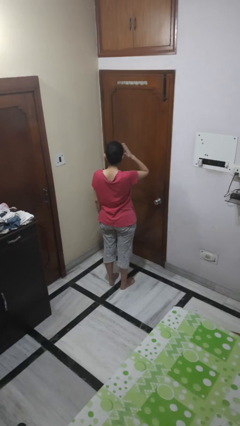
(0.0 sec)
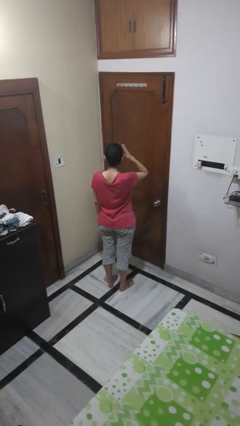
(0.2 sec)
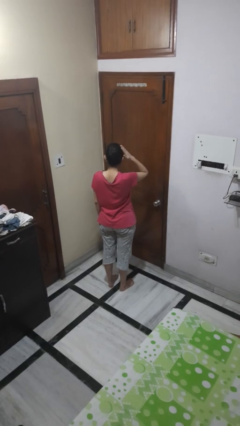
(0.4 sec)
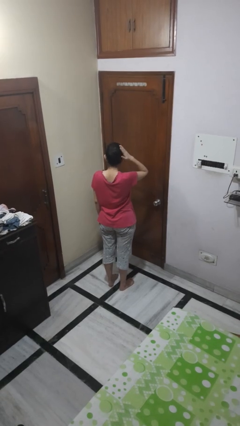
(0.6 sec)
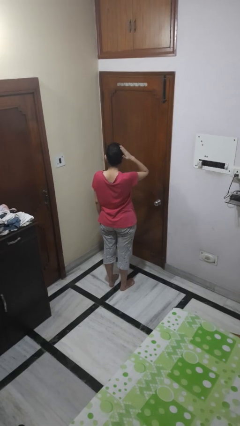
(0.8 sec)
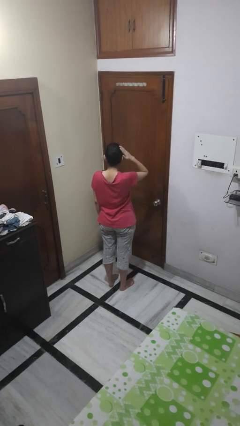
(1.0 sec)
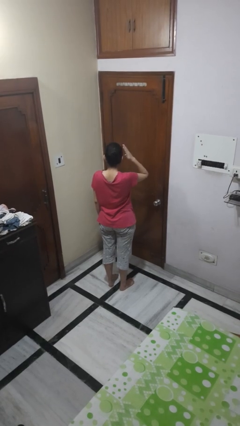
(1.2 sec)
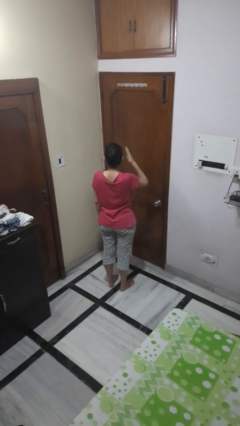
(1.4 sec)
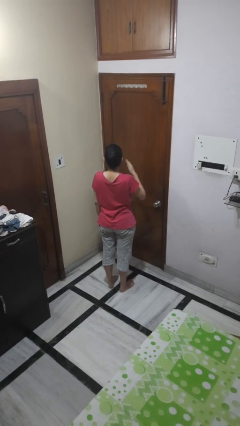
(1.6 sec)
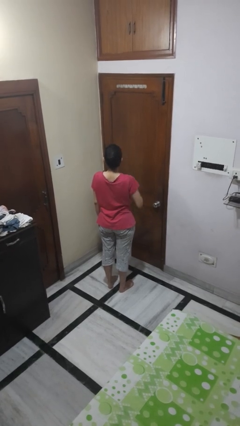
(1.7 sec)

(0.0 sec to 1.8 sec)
person pats head

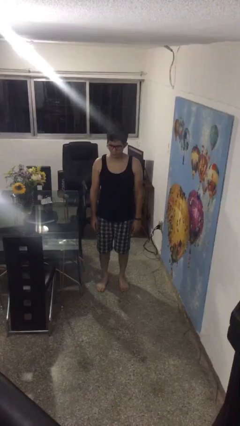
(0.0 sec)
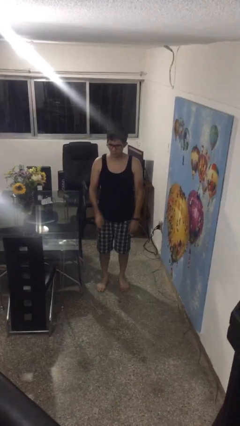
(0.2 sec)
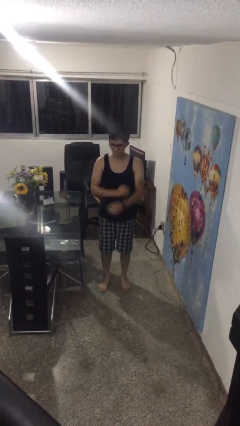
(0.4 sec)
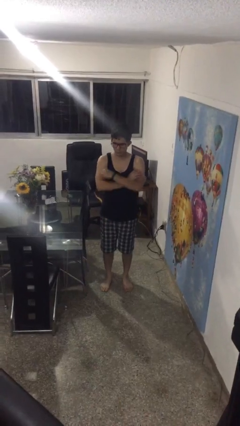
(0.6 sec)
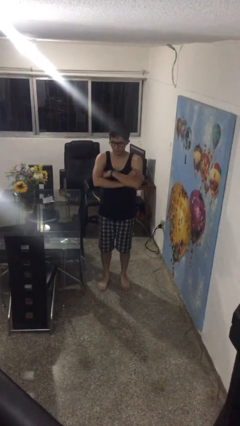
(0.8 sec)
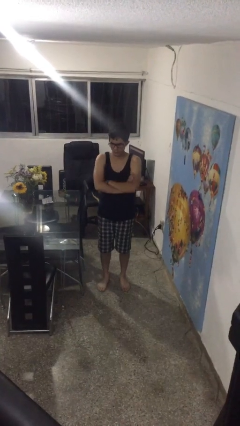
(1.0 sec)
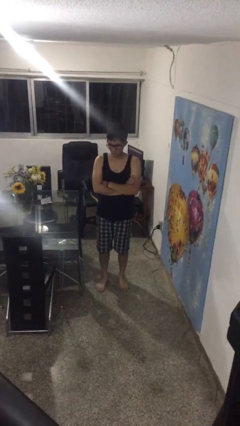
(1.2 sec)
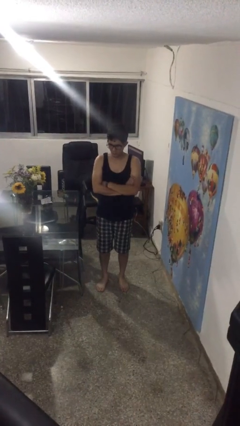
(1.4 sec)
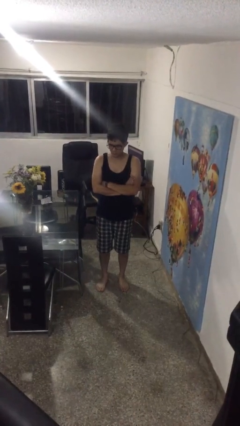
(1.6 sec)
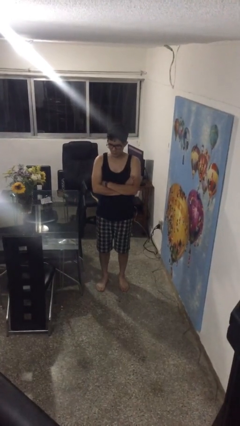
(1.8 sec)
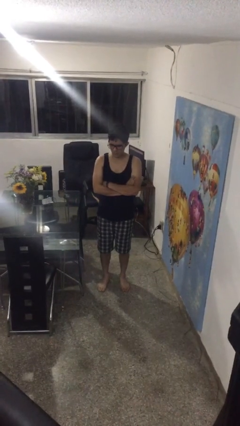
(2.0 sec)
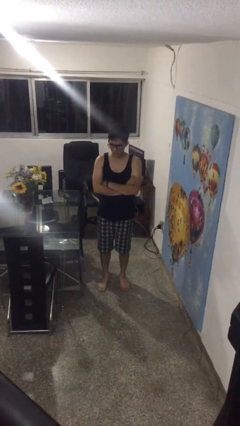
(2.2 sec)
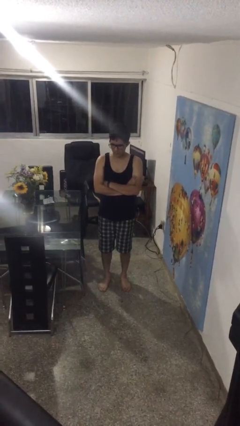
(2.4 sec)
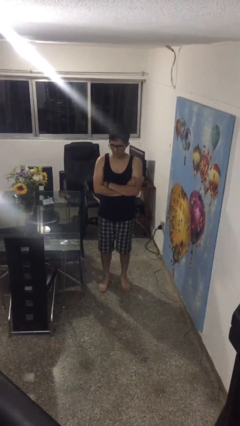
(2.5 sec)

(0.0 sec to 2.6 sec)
person crosses arms

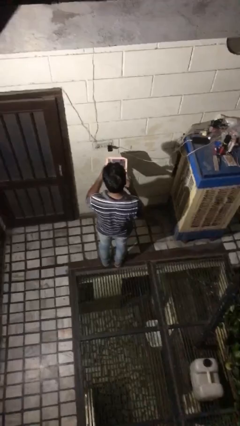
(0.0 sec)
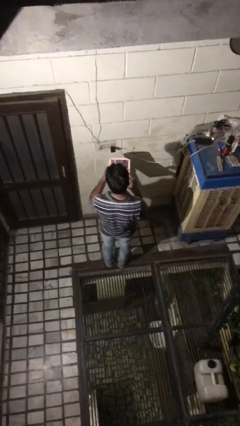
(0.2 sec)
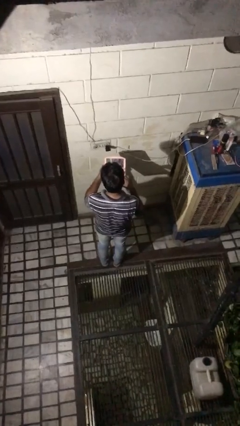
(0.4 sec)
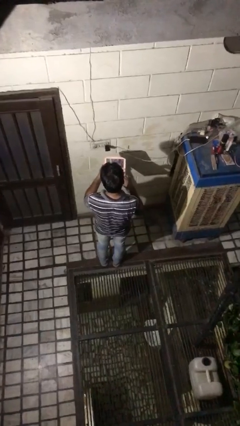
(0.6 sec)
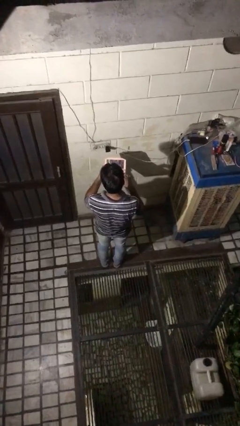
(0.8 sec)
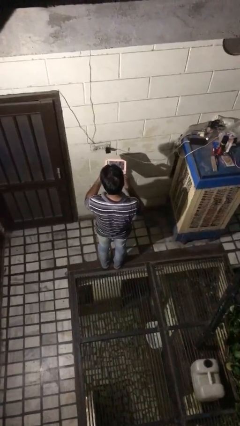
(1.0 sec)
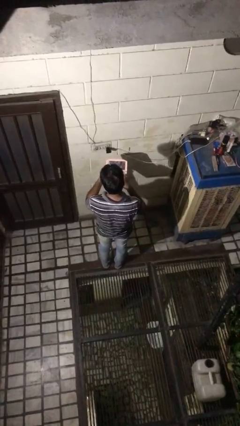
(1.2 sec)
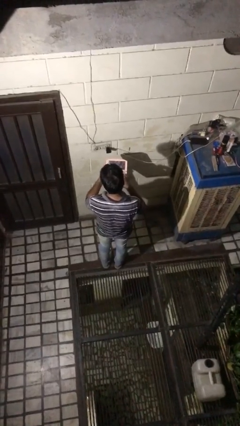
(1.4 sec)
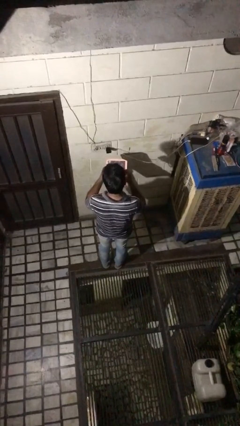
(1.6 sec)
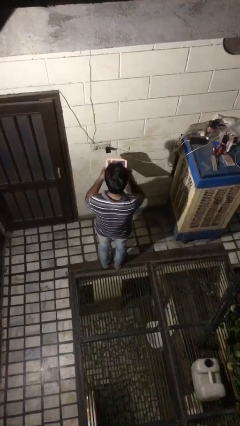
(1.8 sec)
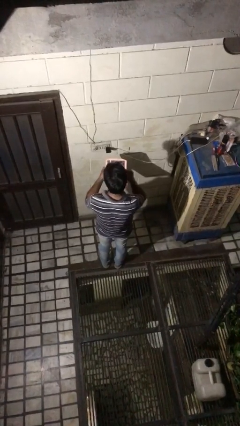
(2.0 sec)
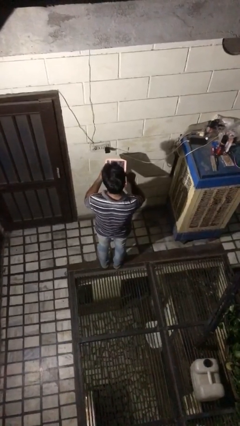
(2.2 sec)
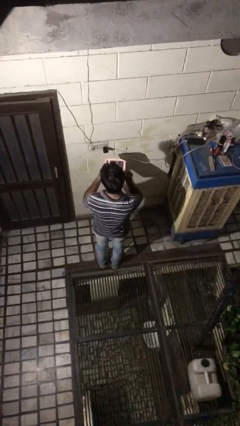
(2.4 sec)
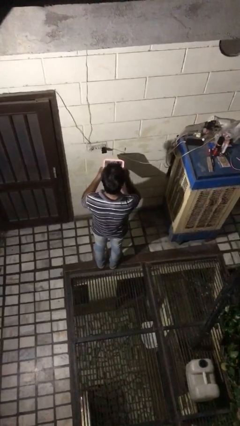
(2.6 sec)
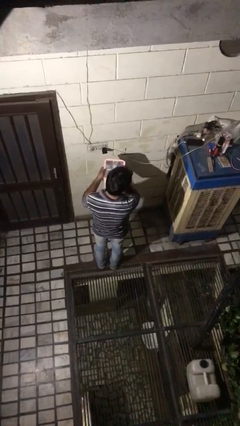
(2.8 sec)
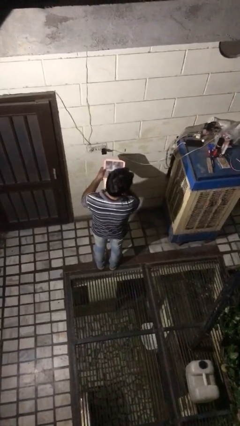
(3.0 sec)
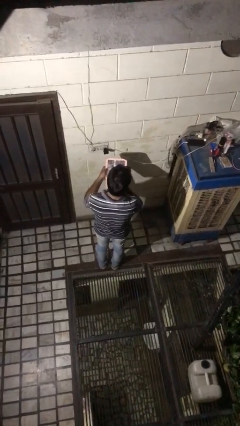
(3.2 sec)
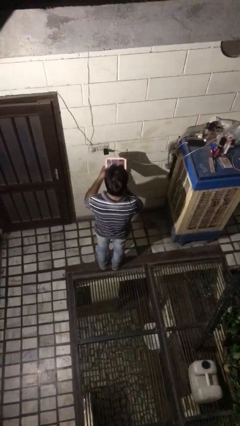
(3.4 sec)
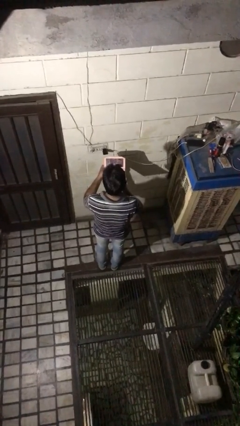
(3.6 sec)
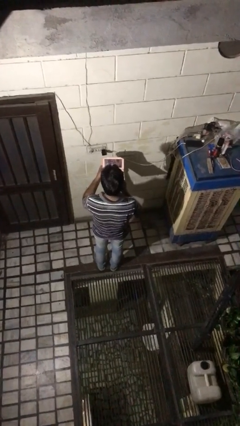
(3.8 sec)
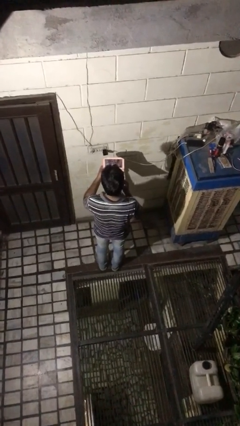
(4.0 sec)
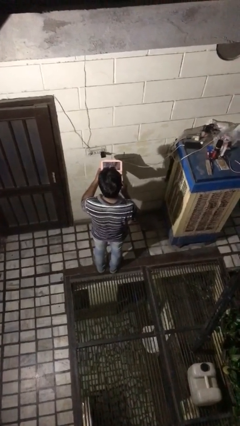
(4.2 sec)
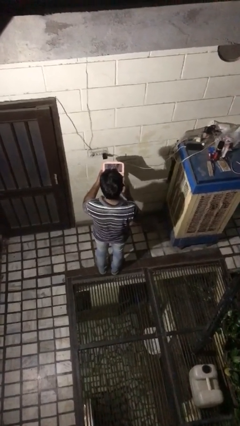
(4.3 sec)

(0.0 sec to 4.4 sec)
person applies foundation makeup

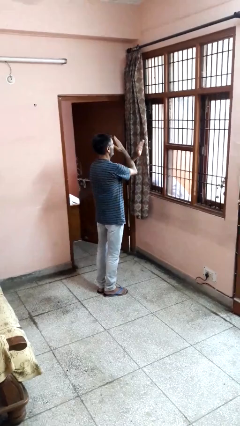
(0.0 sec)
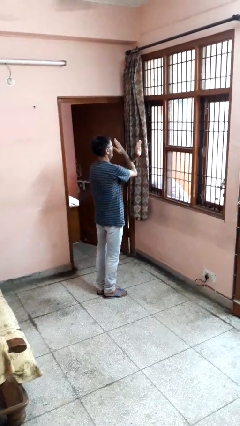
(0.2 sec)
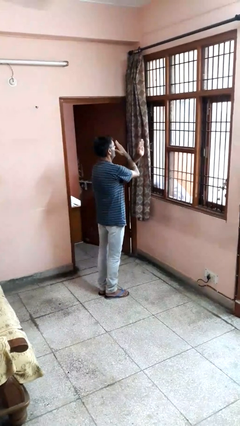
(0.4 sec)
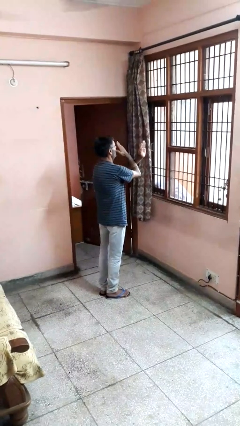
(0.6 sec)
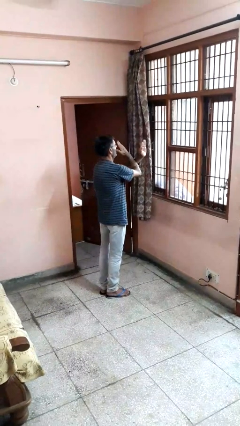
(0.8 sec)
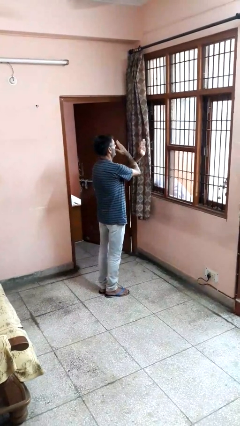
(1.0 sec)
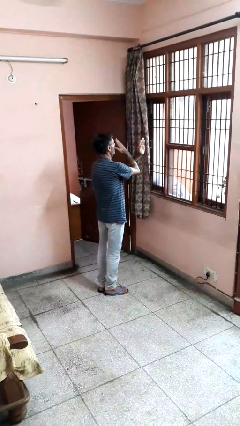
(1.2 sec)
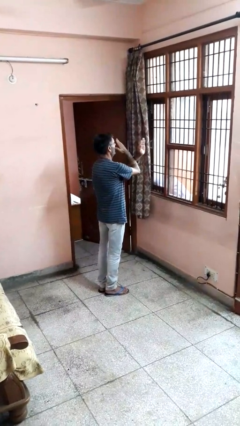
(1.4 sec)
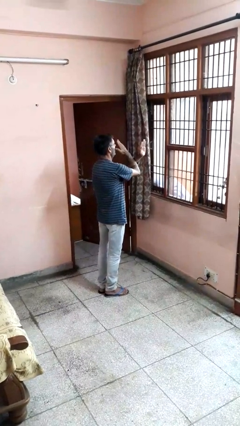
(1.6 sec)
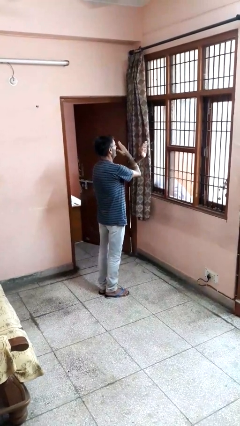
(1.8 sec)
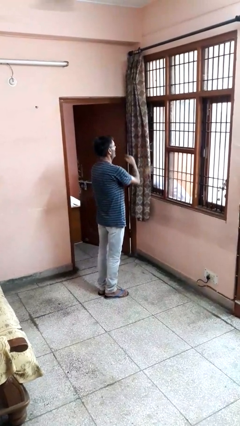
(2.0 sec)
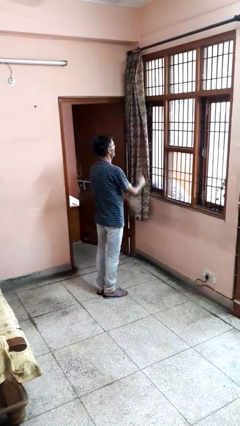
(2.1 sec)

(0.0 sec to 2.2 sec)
person gestures arms x

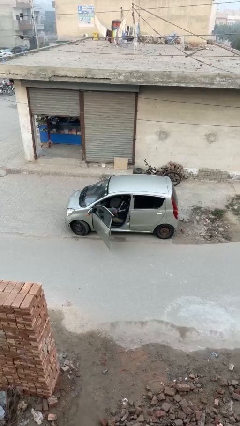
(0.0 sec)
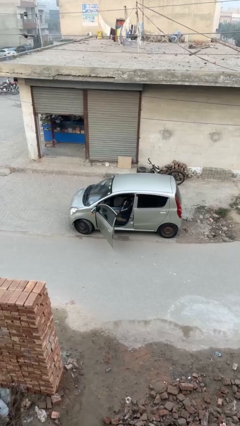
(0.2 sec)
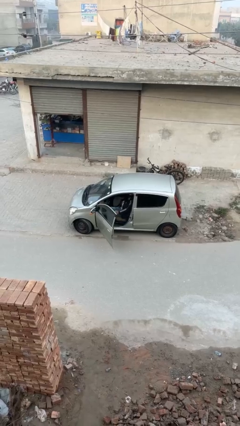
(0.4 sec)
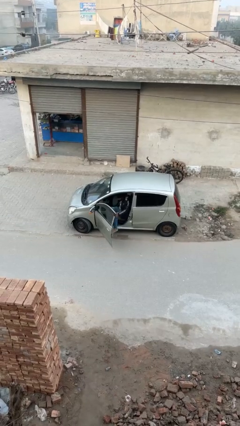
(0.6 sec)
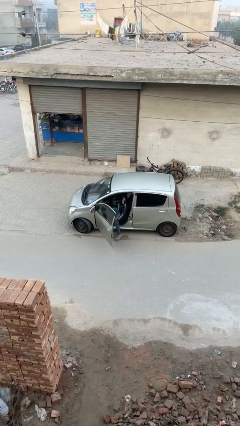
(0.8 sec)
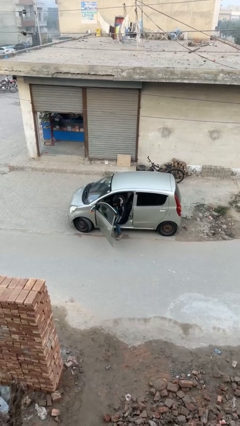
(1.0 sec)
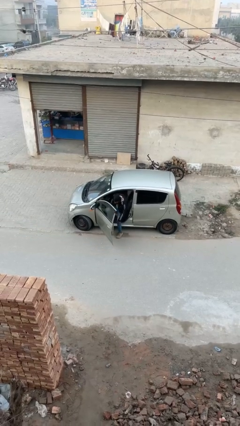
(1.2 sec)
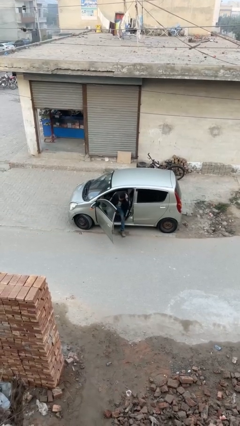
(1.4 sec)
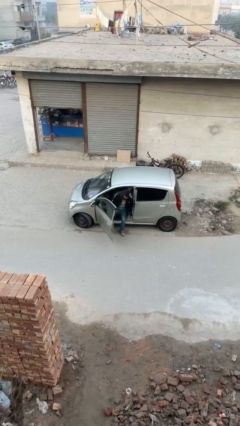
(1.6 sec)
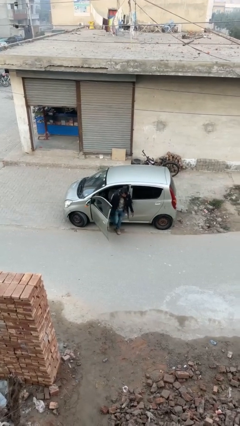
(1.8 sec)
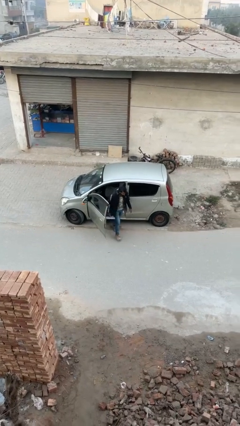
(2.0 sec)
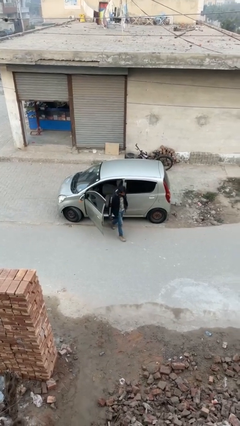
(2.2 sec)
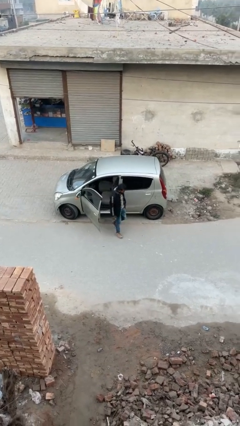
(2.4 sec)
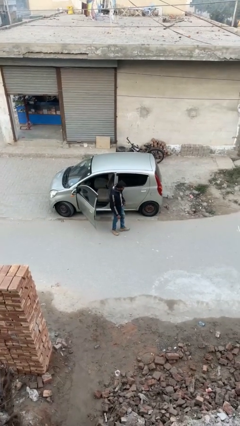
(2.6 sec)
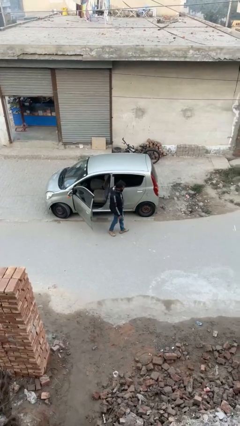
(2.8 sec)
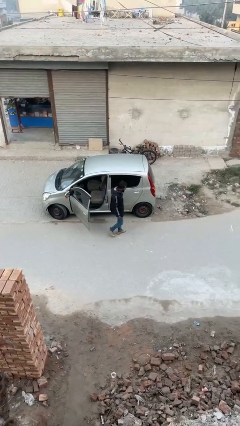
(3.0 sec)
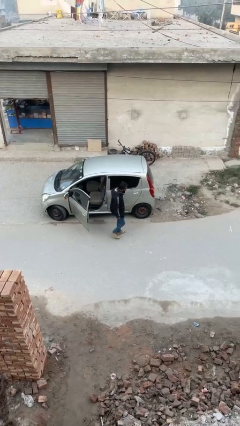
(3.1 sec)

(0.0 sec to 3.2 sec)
person exits car

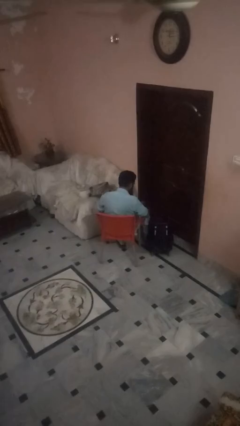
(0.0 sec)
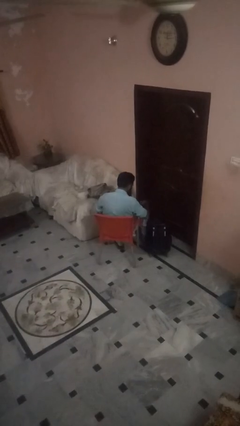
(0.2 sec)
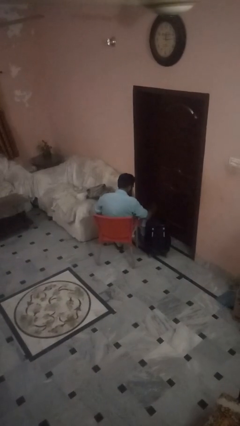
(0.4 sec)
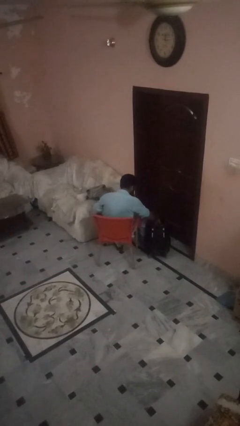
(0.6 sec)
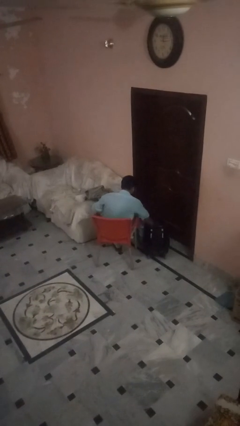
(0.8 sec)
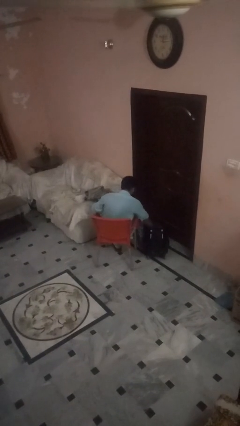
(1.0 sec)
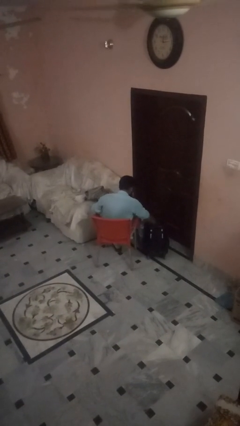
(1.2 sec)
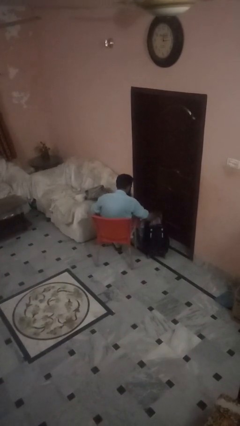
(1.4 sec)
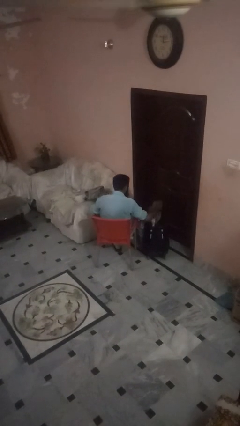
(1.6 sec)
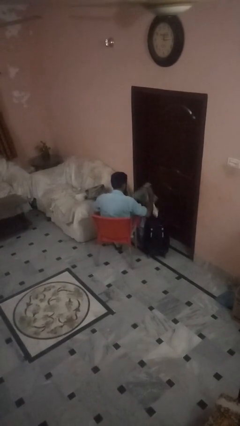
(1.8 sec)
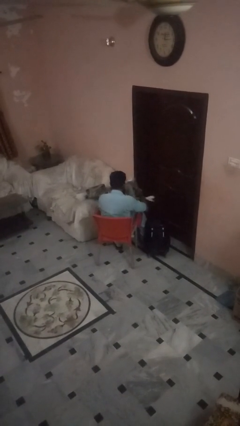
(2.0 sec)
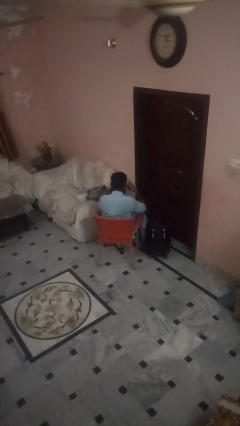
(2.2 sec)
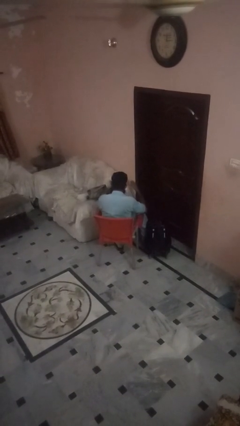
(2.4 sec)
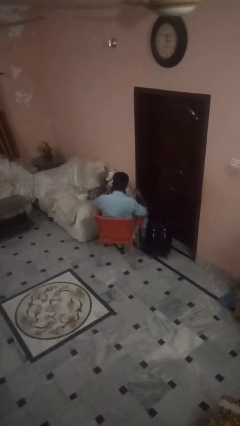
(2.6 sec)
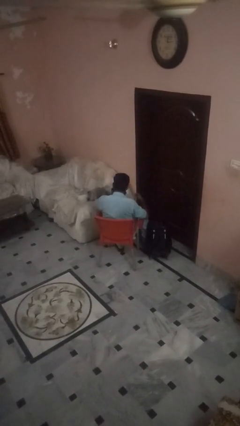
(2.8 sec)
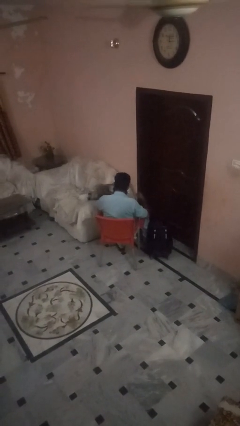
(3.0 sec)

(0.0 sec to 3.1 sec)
person unloads clothes from suitcase

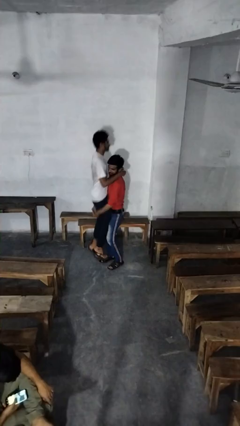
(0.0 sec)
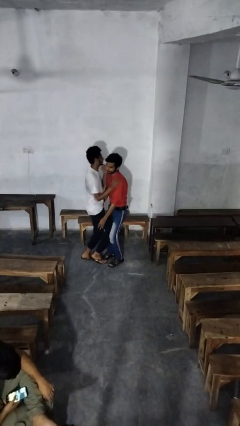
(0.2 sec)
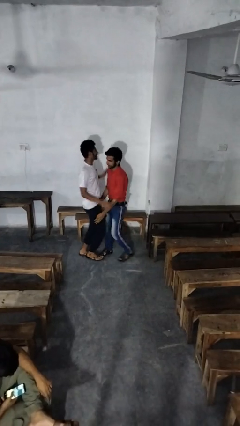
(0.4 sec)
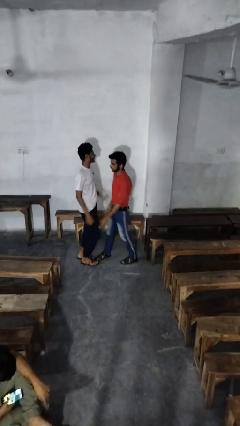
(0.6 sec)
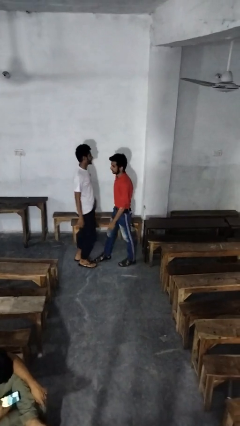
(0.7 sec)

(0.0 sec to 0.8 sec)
person puts down person
